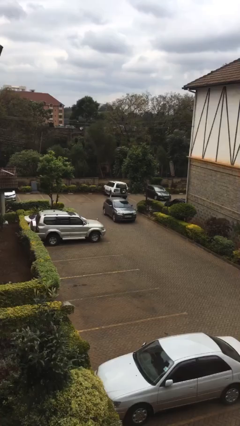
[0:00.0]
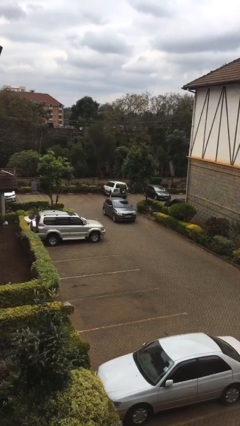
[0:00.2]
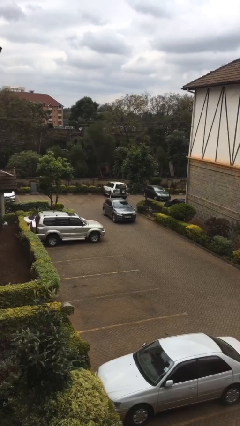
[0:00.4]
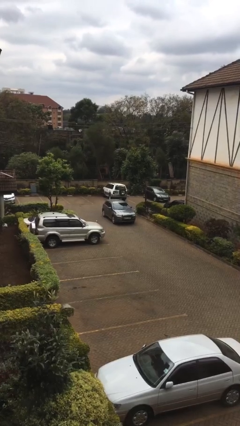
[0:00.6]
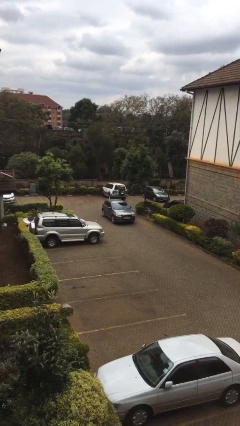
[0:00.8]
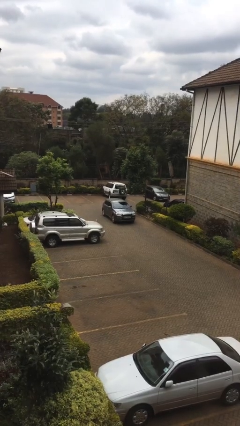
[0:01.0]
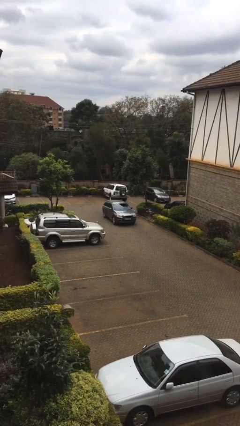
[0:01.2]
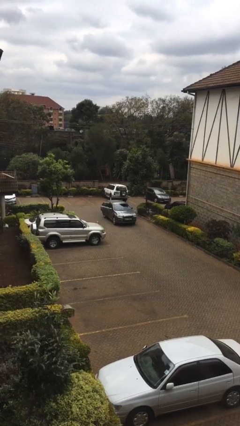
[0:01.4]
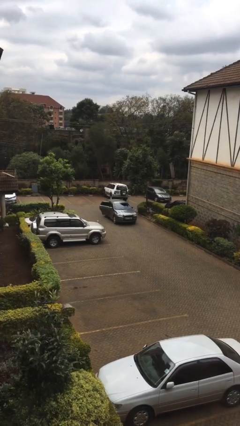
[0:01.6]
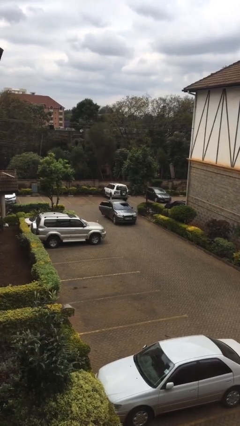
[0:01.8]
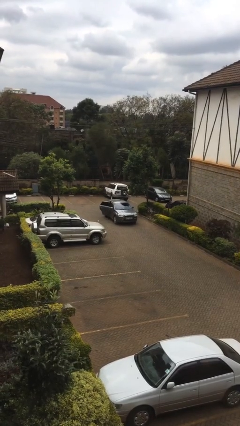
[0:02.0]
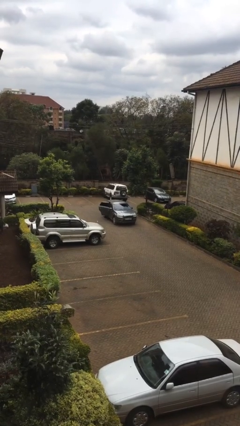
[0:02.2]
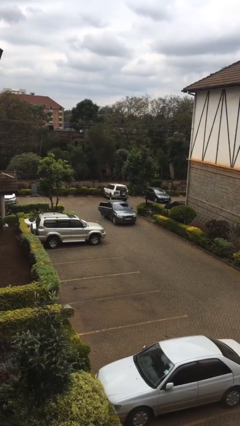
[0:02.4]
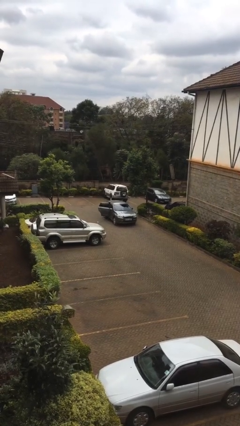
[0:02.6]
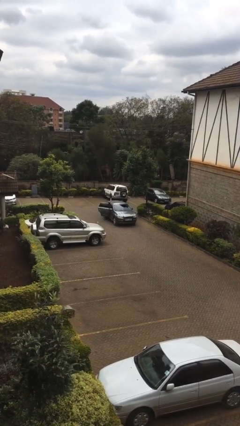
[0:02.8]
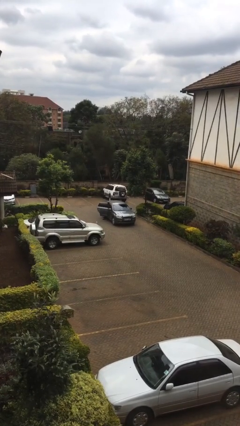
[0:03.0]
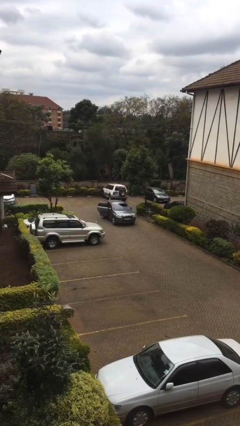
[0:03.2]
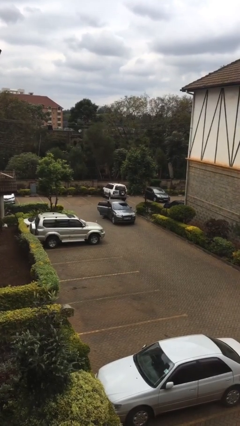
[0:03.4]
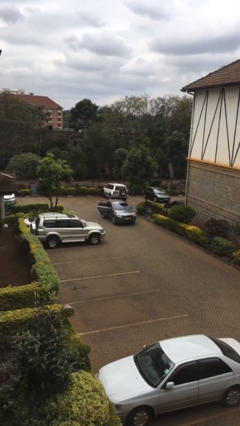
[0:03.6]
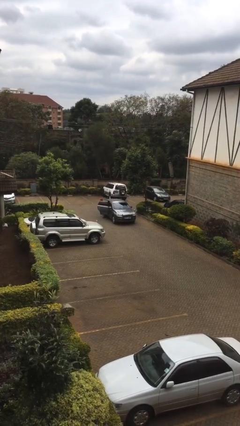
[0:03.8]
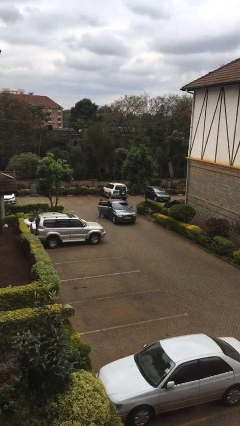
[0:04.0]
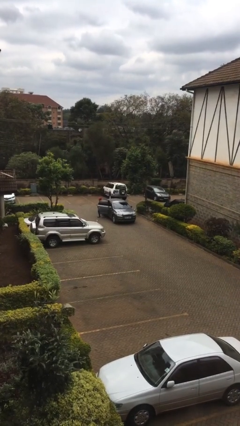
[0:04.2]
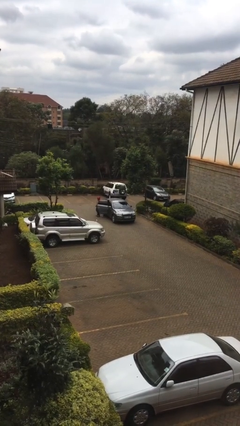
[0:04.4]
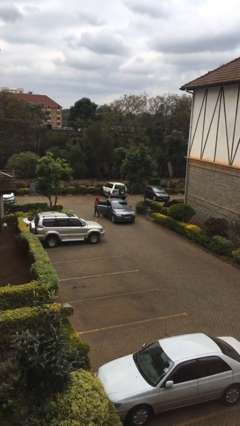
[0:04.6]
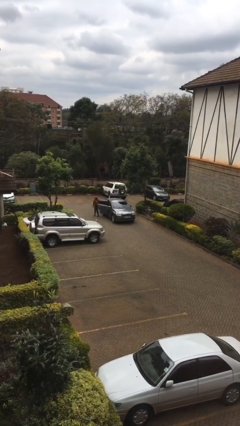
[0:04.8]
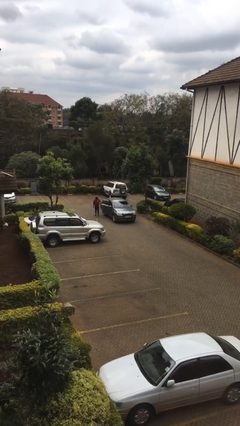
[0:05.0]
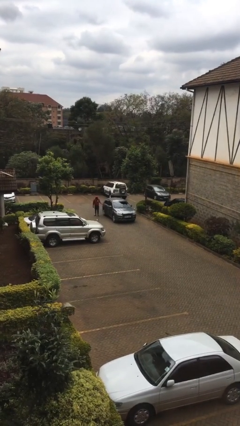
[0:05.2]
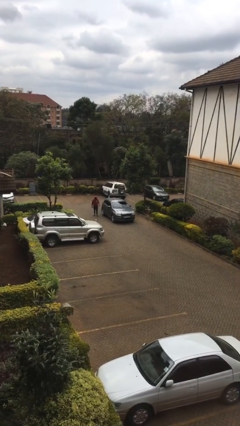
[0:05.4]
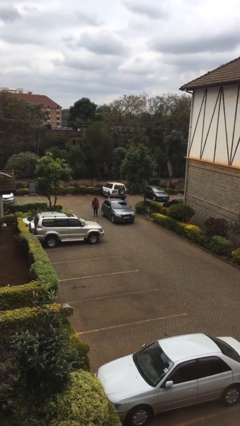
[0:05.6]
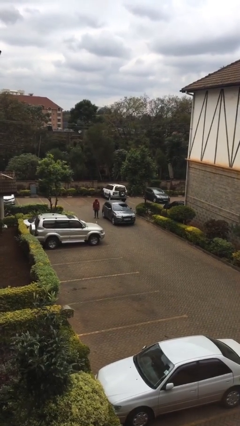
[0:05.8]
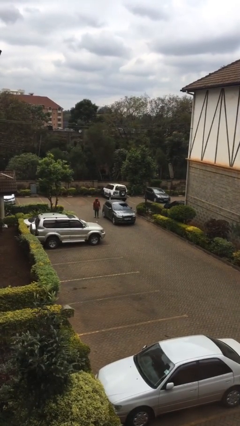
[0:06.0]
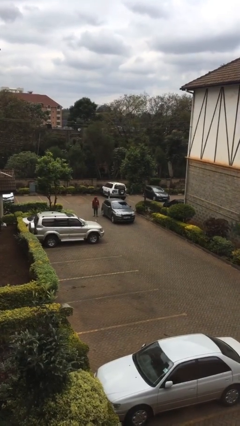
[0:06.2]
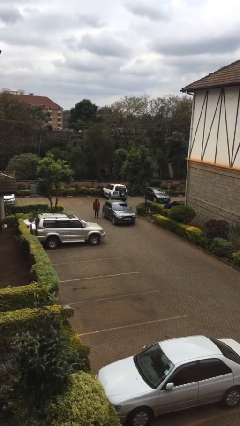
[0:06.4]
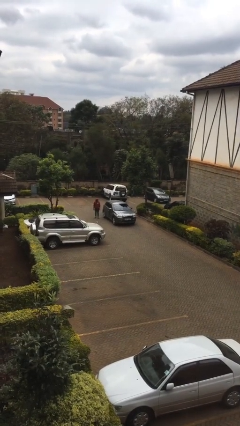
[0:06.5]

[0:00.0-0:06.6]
car drops off person

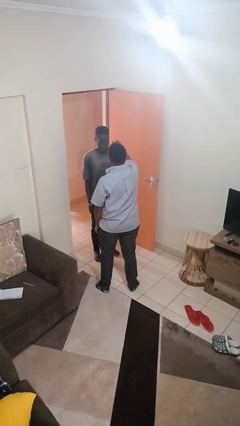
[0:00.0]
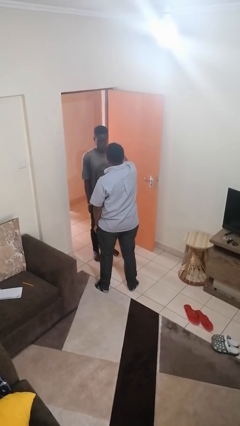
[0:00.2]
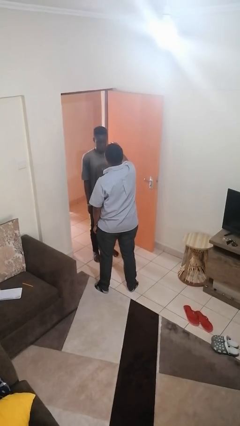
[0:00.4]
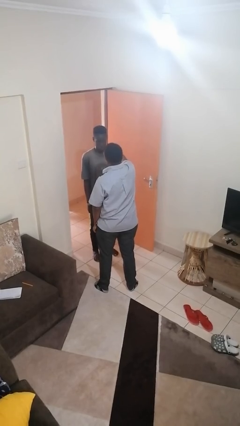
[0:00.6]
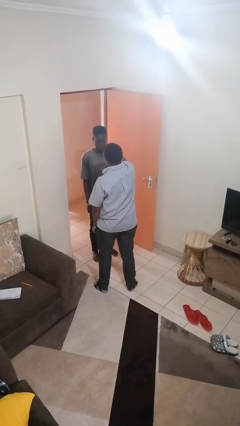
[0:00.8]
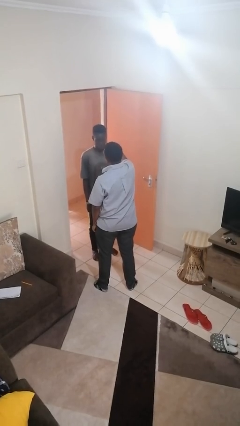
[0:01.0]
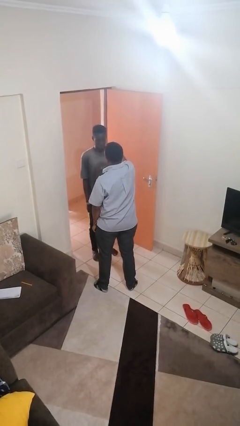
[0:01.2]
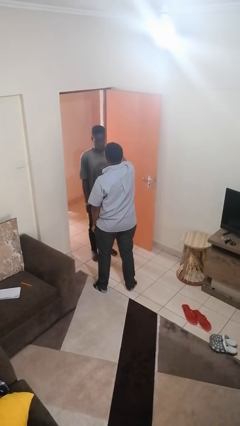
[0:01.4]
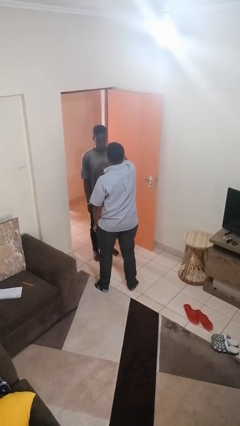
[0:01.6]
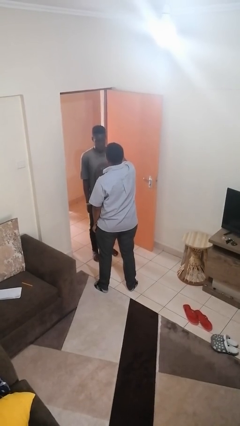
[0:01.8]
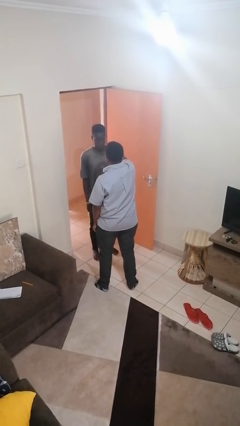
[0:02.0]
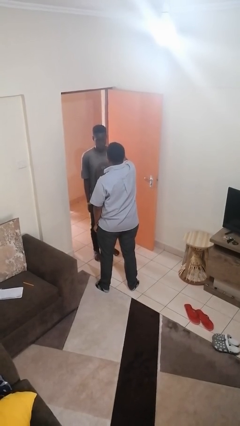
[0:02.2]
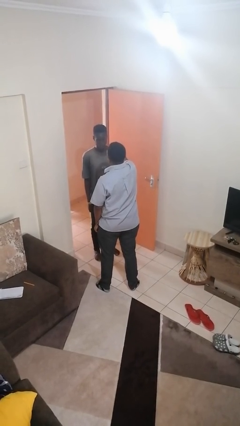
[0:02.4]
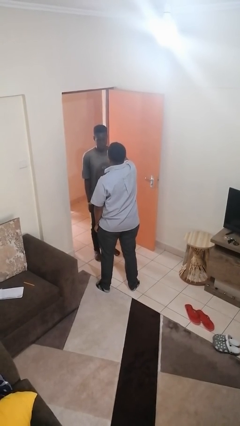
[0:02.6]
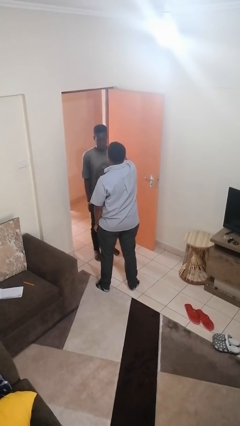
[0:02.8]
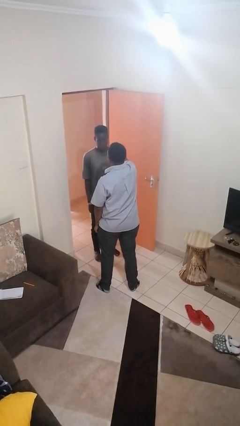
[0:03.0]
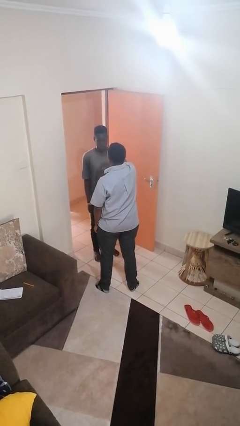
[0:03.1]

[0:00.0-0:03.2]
person pounds shoulders of person

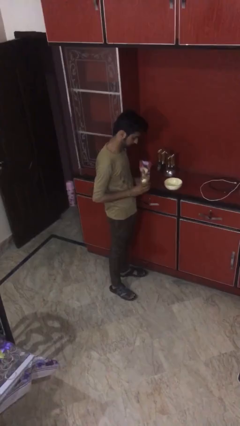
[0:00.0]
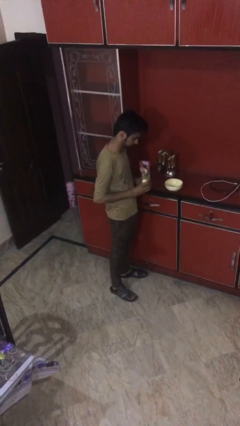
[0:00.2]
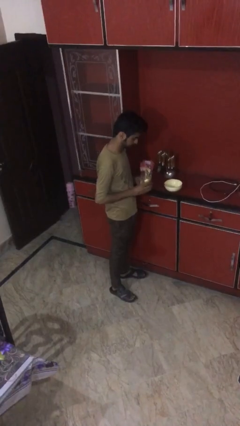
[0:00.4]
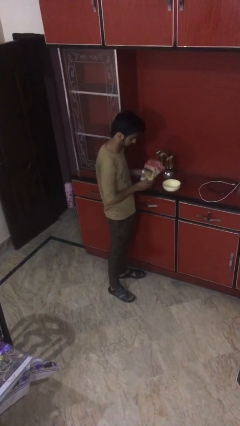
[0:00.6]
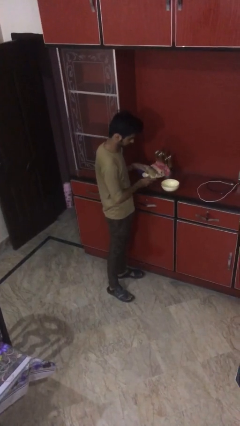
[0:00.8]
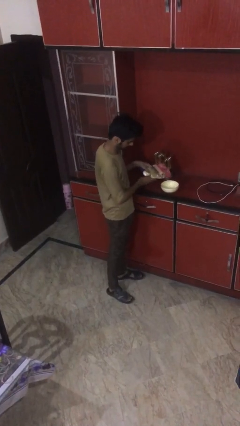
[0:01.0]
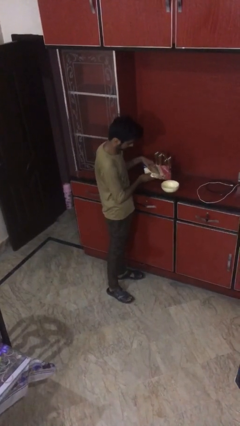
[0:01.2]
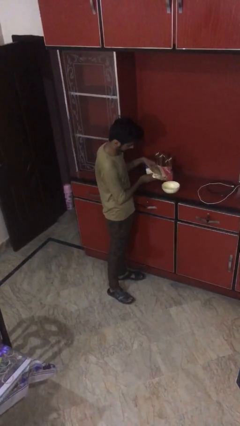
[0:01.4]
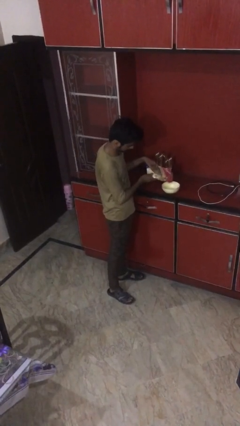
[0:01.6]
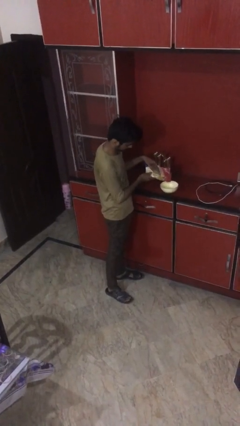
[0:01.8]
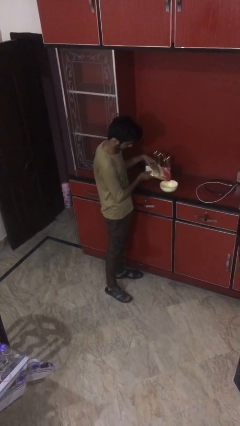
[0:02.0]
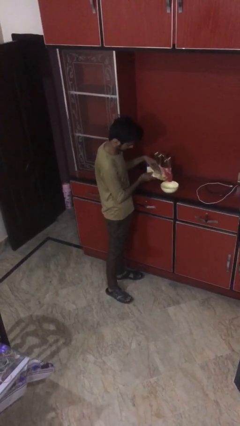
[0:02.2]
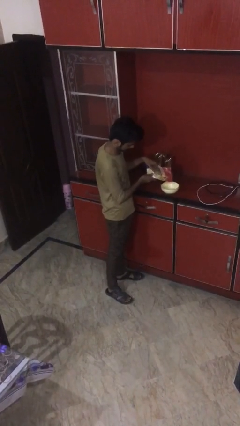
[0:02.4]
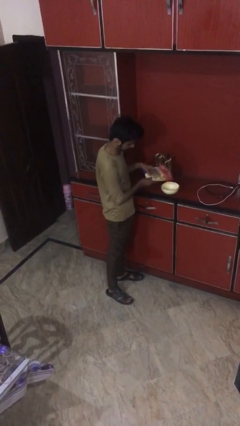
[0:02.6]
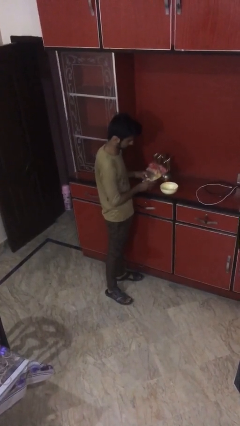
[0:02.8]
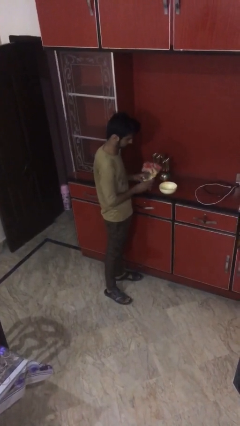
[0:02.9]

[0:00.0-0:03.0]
person pours into bowl

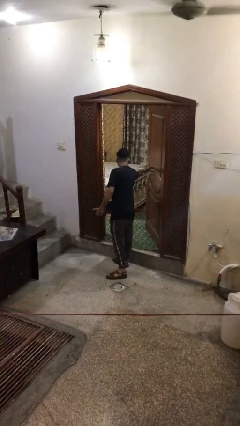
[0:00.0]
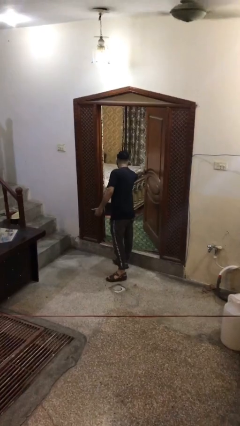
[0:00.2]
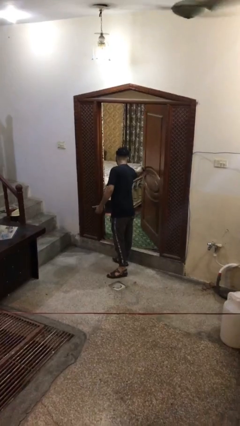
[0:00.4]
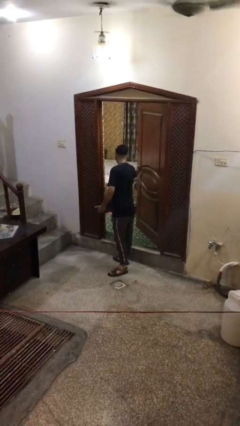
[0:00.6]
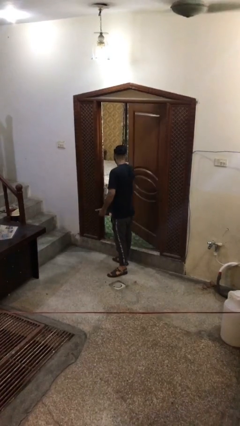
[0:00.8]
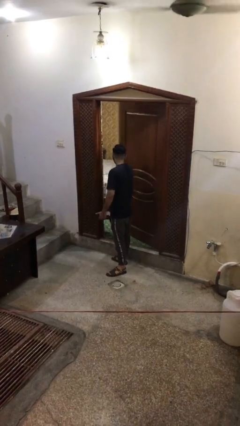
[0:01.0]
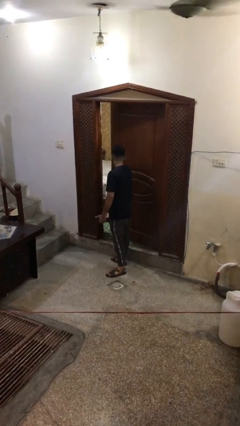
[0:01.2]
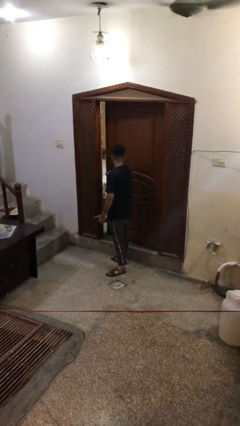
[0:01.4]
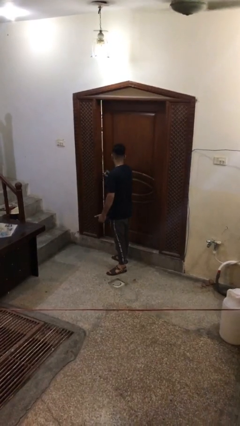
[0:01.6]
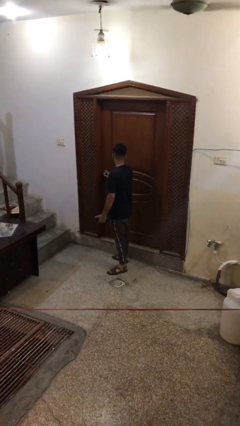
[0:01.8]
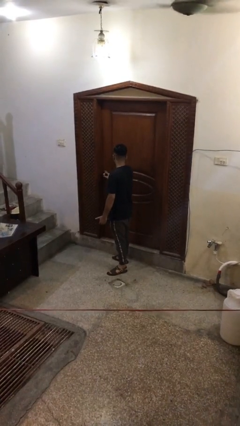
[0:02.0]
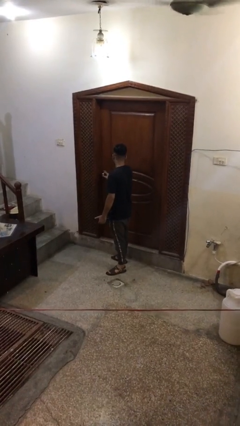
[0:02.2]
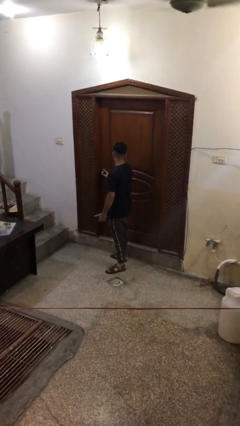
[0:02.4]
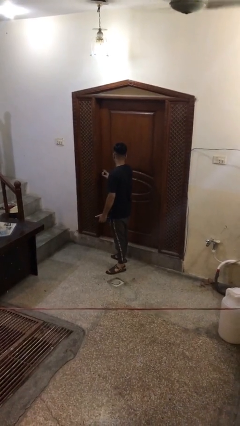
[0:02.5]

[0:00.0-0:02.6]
person closes facility door

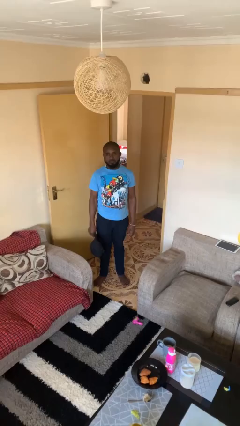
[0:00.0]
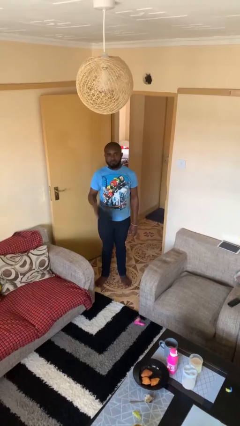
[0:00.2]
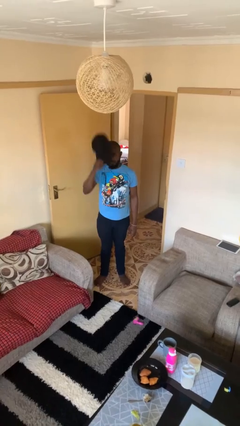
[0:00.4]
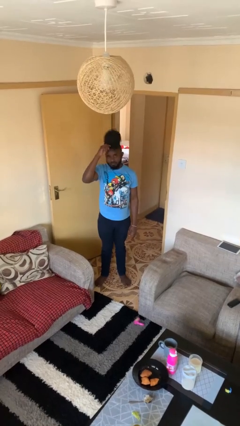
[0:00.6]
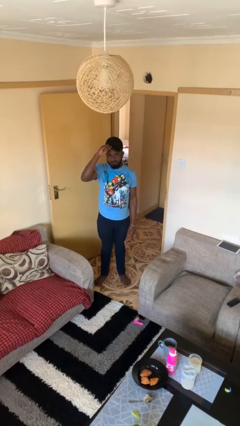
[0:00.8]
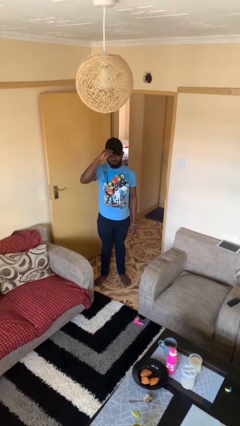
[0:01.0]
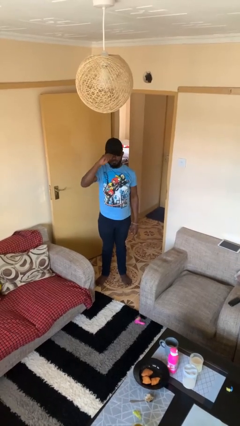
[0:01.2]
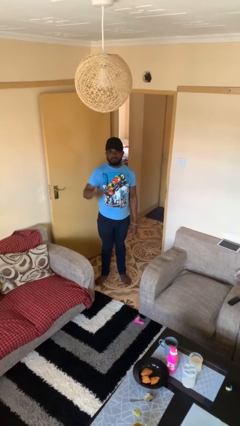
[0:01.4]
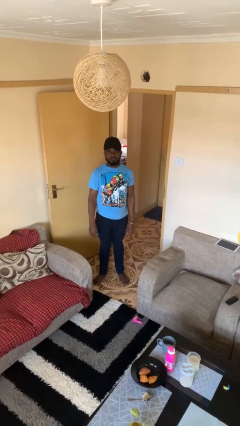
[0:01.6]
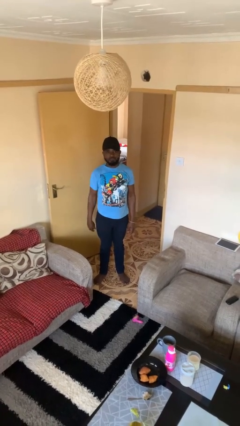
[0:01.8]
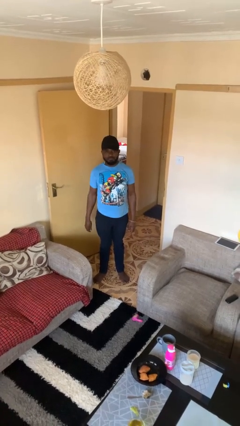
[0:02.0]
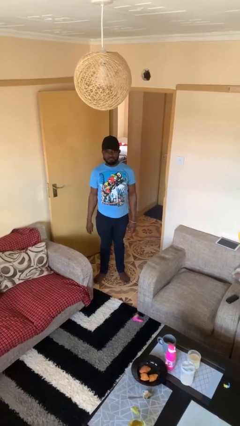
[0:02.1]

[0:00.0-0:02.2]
person puts on hat
